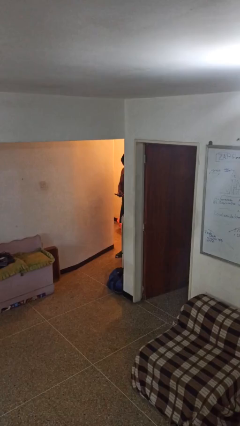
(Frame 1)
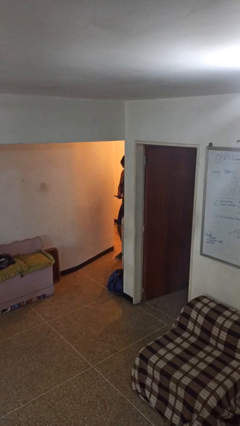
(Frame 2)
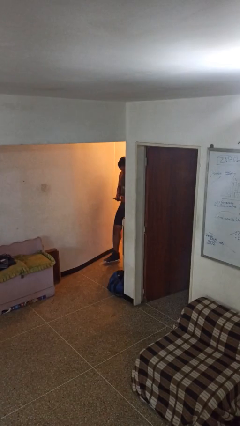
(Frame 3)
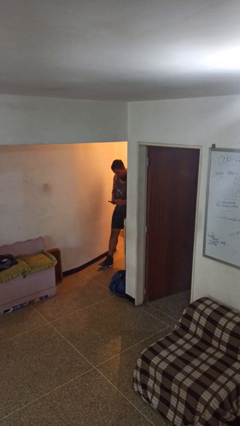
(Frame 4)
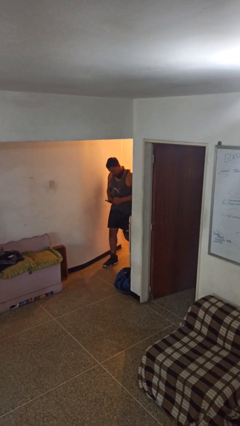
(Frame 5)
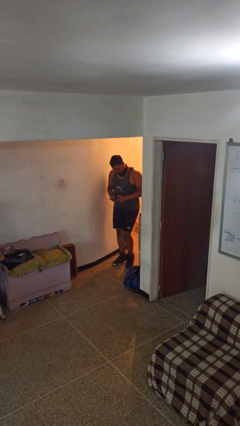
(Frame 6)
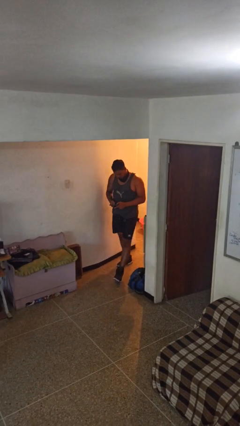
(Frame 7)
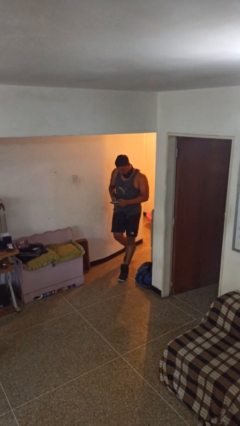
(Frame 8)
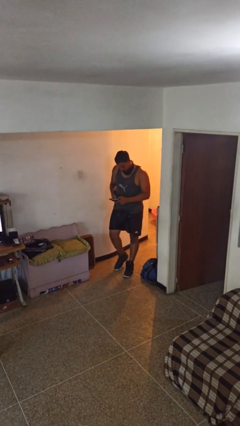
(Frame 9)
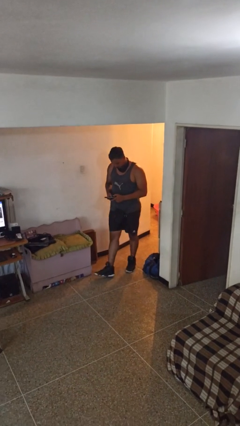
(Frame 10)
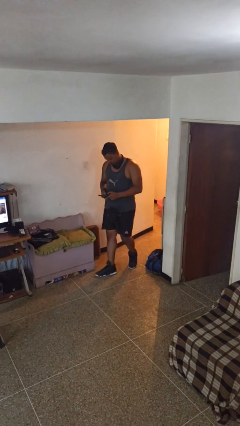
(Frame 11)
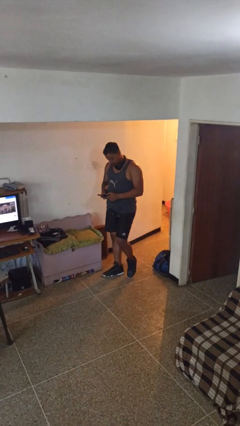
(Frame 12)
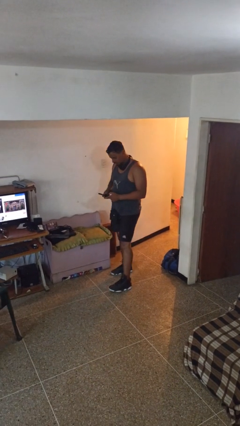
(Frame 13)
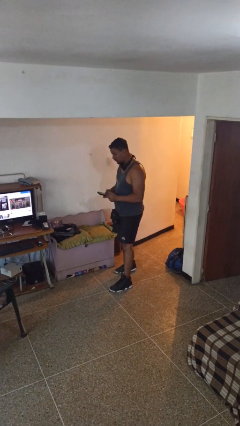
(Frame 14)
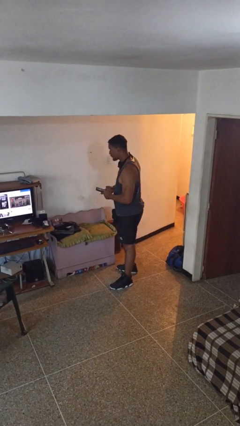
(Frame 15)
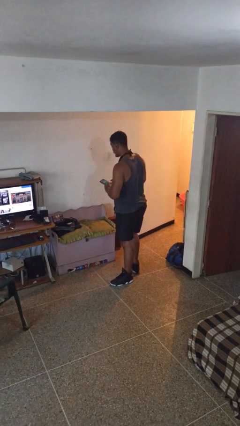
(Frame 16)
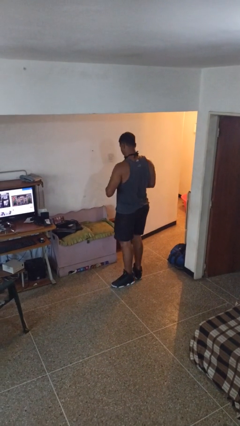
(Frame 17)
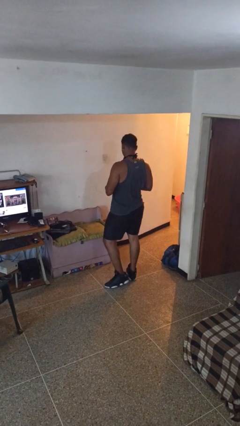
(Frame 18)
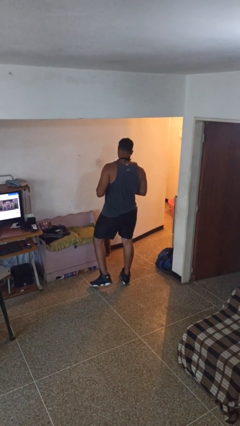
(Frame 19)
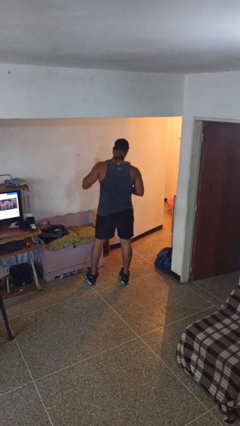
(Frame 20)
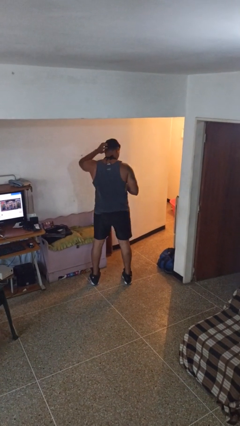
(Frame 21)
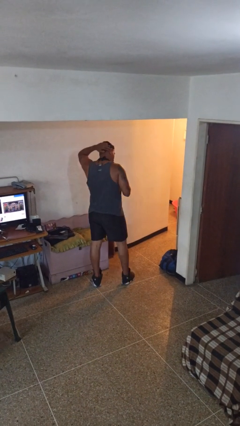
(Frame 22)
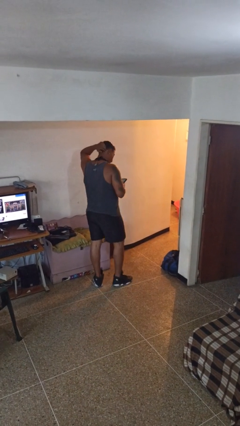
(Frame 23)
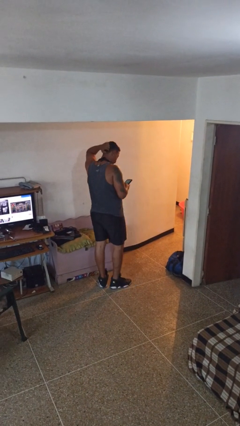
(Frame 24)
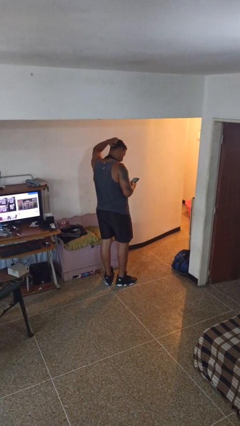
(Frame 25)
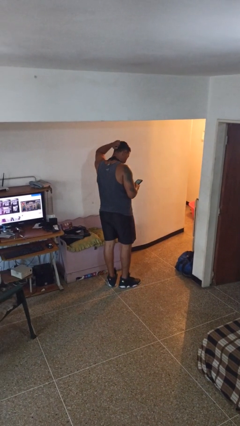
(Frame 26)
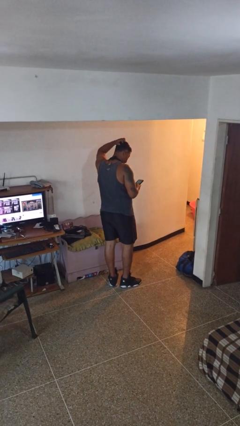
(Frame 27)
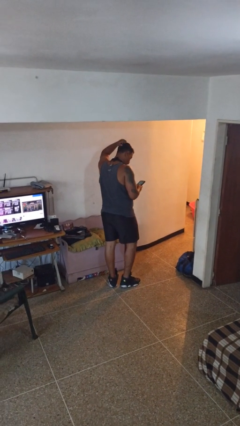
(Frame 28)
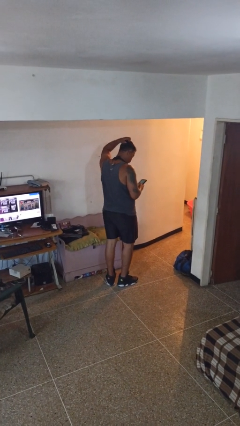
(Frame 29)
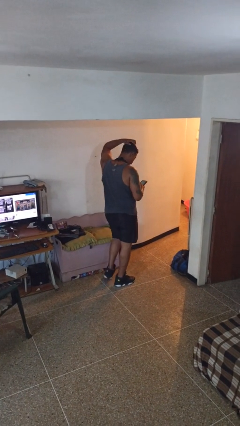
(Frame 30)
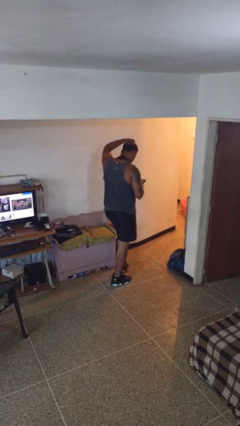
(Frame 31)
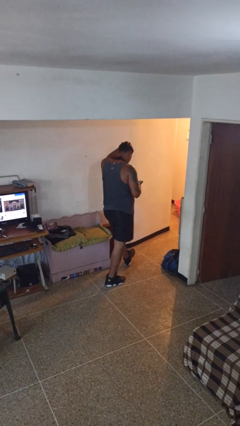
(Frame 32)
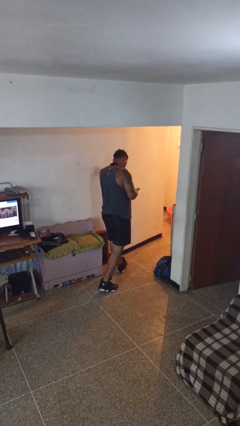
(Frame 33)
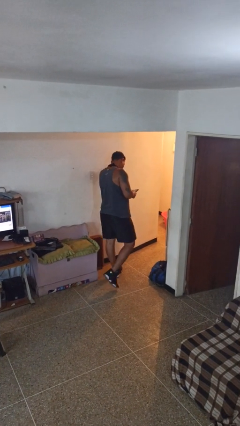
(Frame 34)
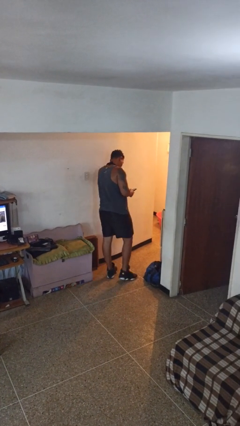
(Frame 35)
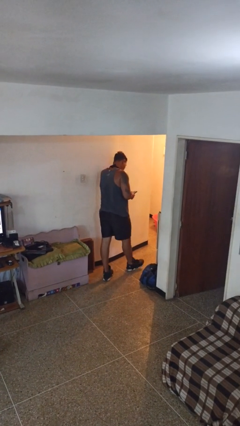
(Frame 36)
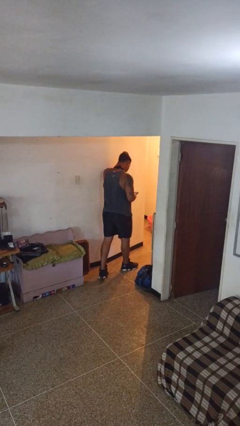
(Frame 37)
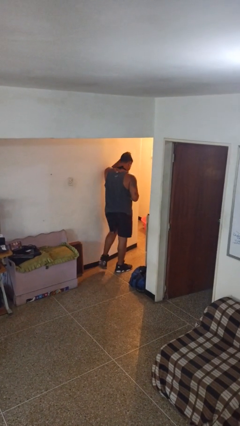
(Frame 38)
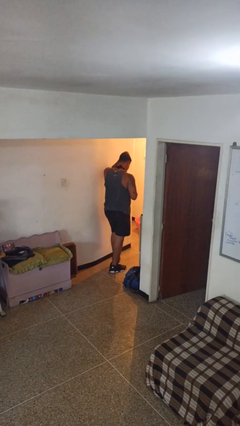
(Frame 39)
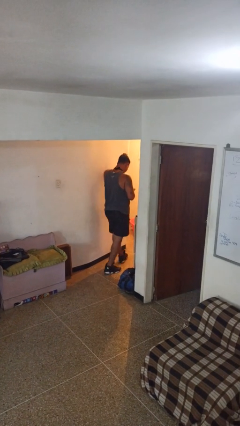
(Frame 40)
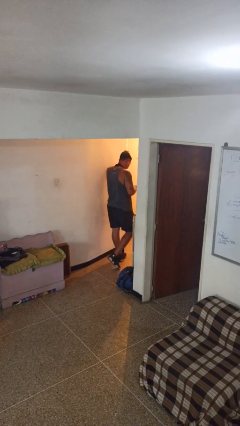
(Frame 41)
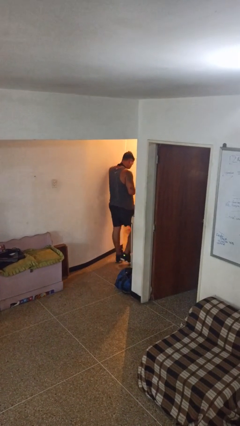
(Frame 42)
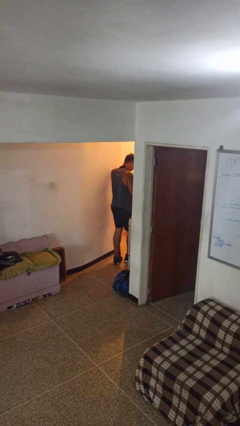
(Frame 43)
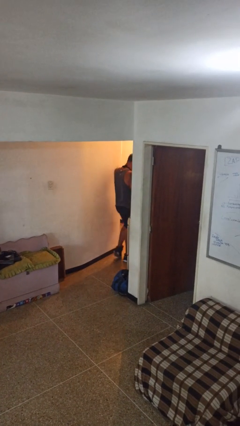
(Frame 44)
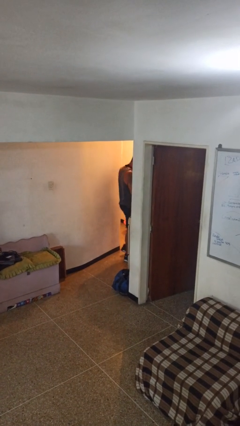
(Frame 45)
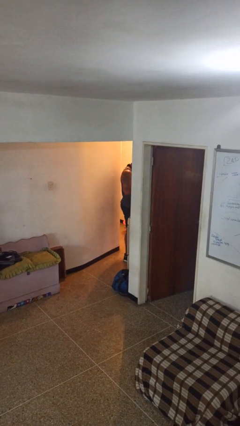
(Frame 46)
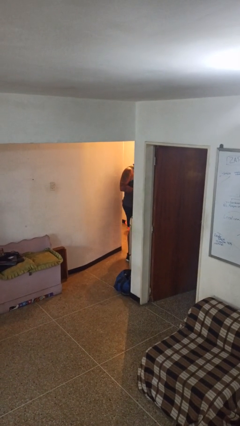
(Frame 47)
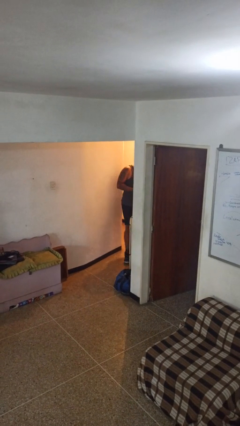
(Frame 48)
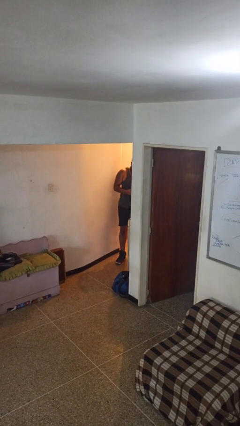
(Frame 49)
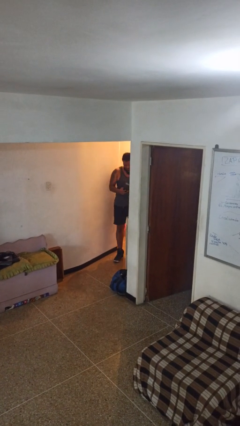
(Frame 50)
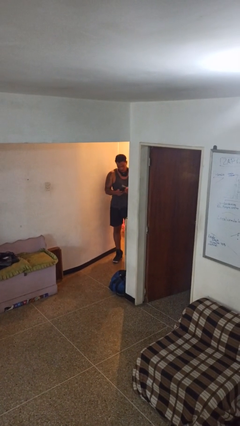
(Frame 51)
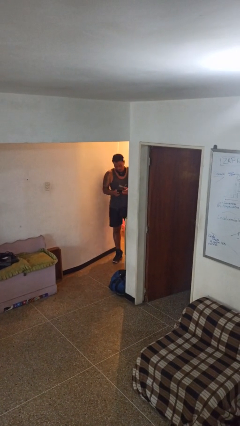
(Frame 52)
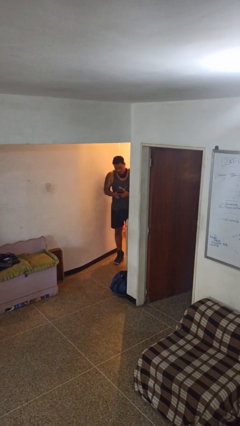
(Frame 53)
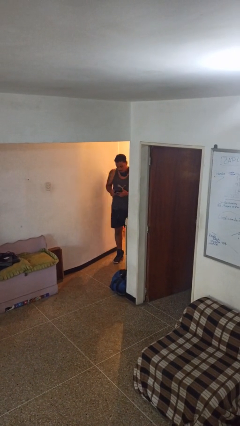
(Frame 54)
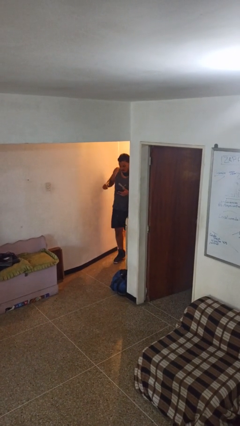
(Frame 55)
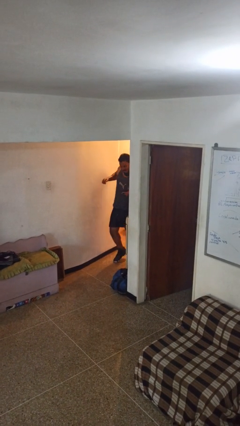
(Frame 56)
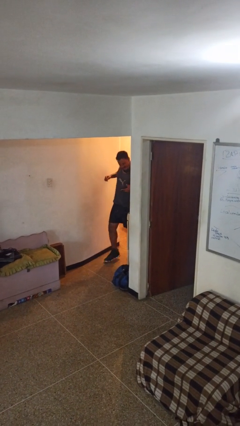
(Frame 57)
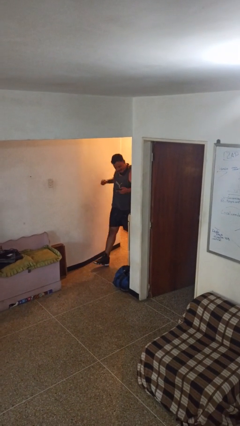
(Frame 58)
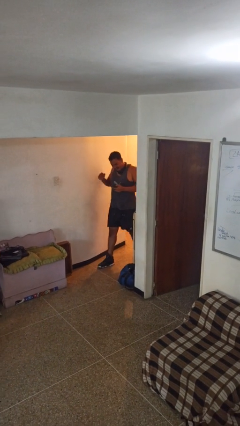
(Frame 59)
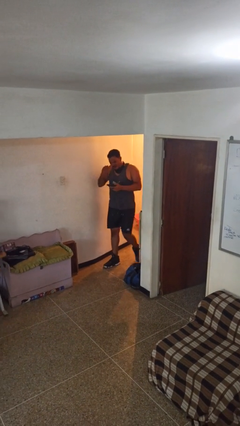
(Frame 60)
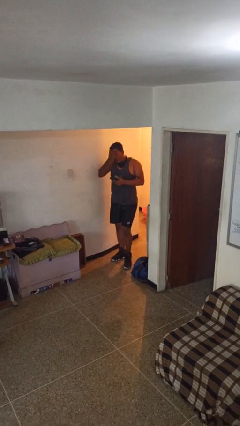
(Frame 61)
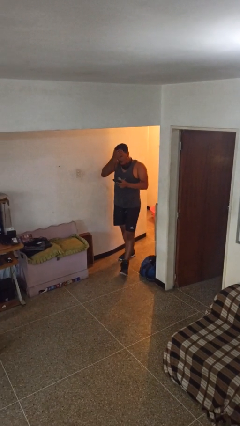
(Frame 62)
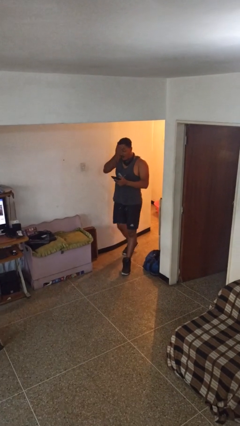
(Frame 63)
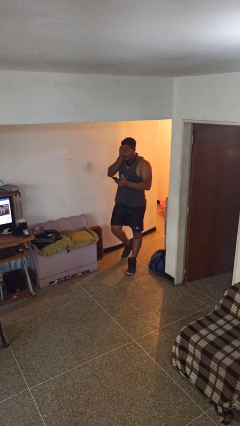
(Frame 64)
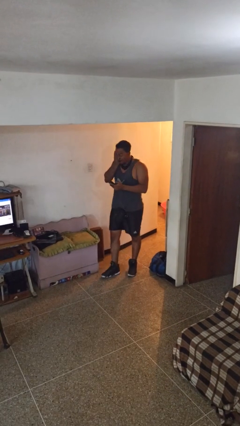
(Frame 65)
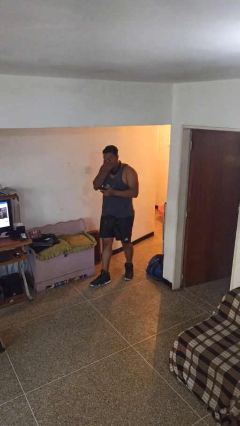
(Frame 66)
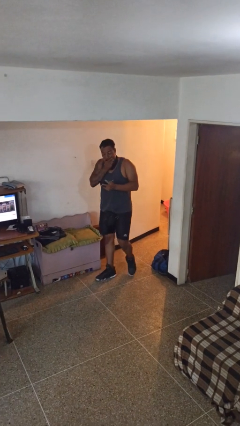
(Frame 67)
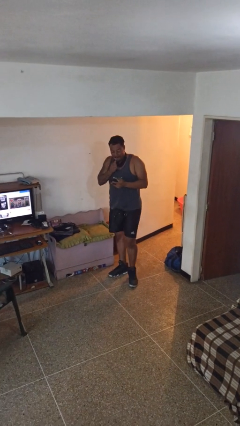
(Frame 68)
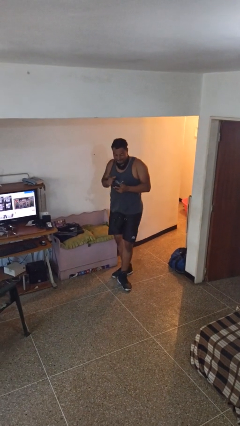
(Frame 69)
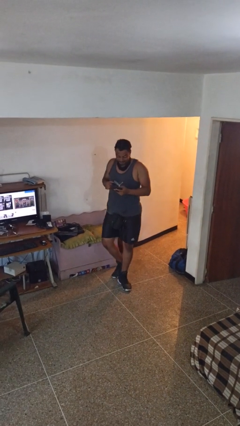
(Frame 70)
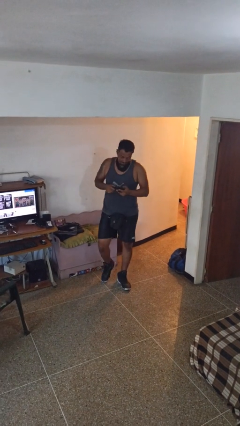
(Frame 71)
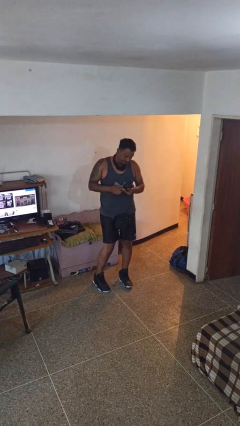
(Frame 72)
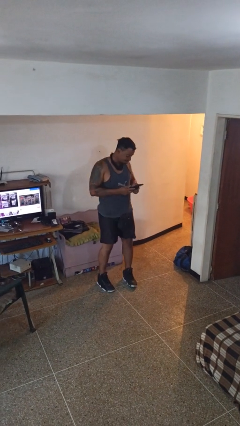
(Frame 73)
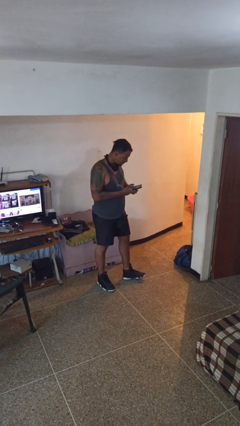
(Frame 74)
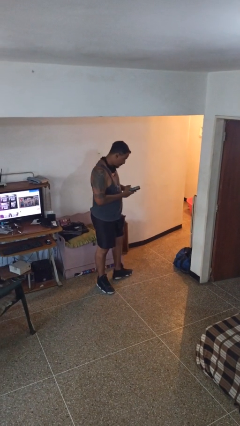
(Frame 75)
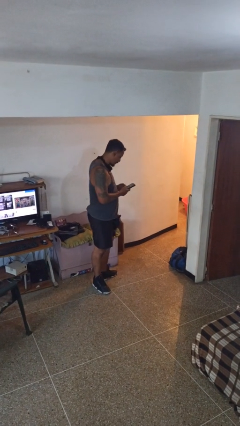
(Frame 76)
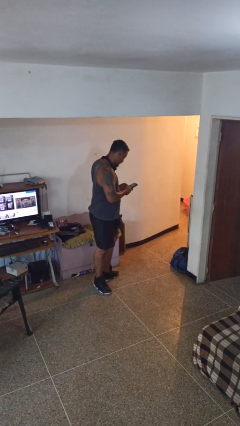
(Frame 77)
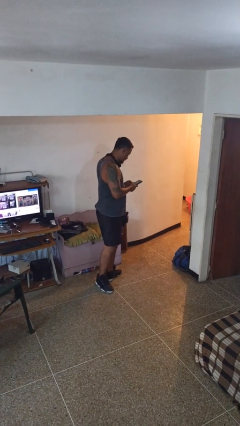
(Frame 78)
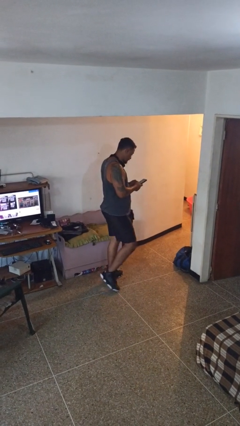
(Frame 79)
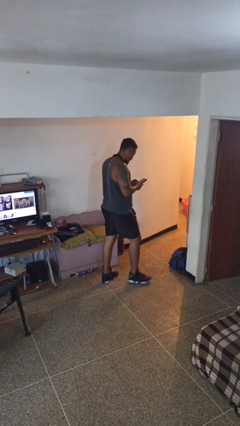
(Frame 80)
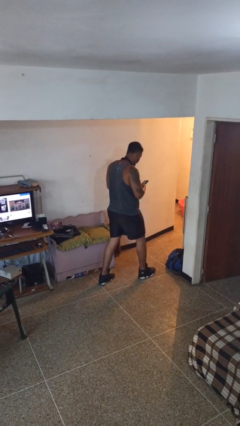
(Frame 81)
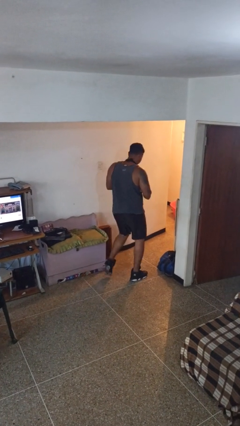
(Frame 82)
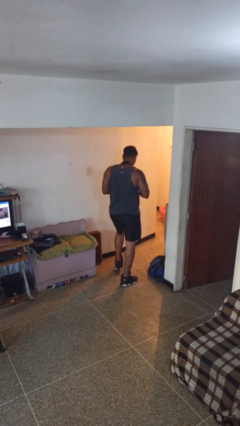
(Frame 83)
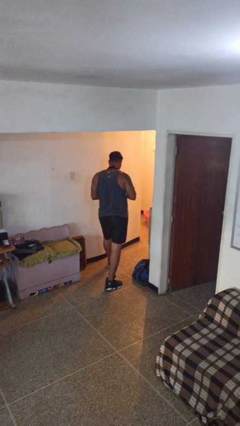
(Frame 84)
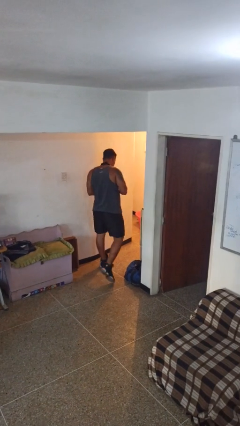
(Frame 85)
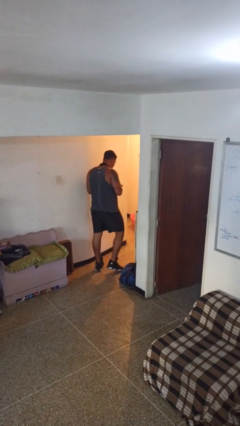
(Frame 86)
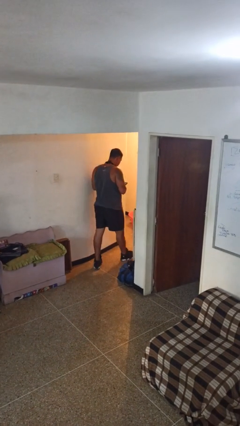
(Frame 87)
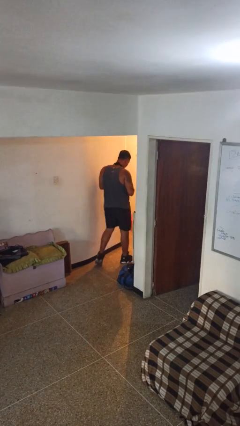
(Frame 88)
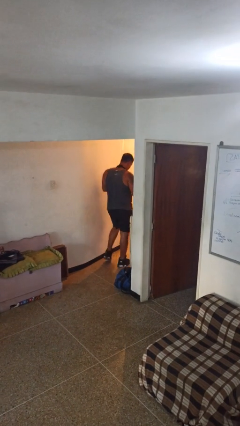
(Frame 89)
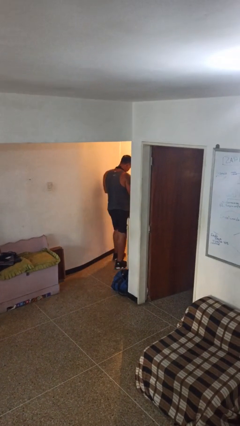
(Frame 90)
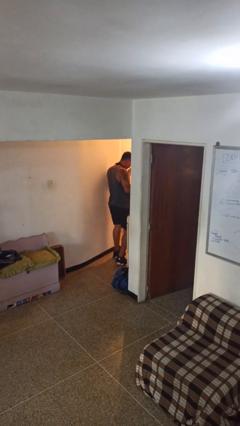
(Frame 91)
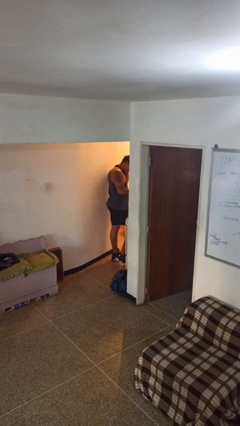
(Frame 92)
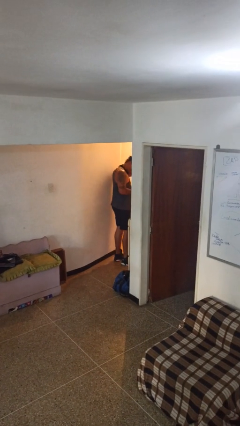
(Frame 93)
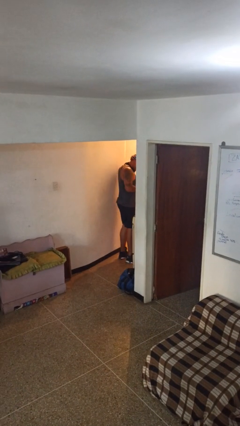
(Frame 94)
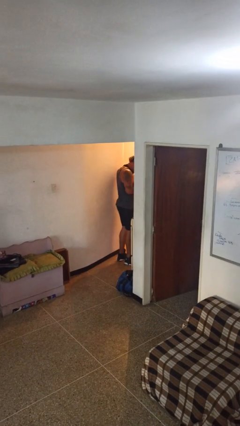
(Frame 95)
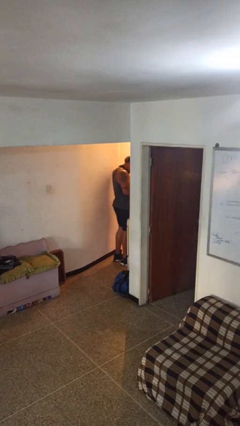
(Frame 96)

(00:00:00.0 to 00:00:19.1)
person texts on phone
